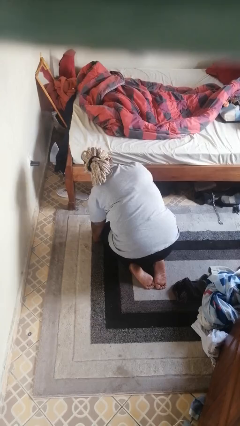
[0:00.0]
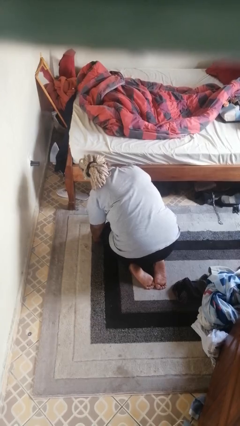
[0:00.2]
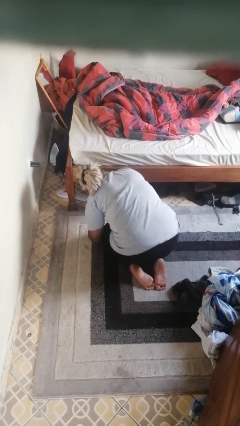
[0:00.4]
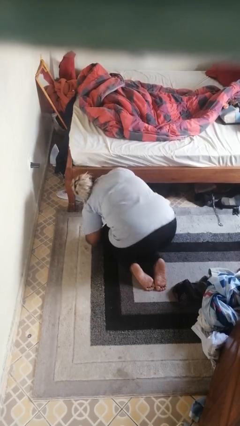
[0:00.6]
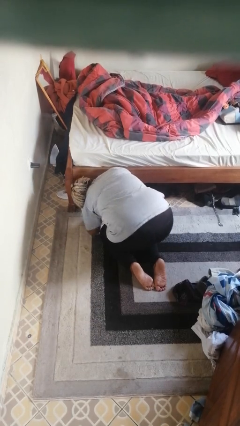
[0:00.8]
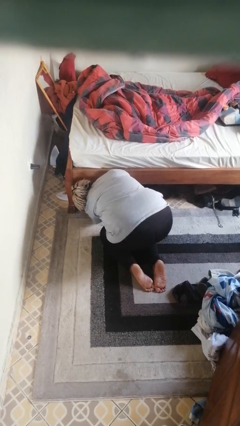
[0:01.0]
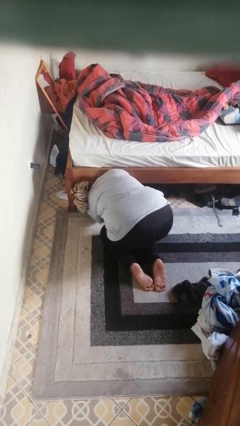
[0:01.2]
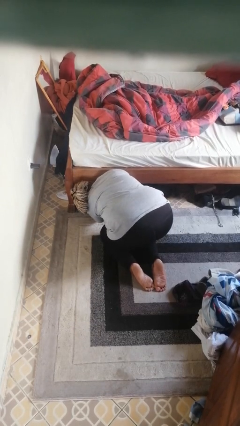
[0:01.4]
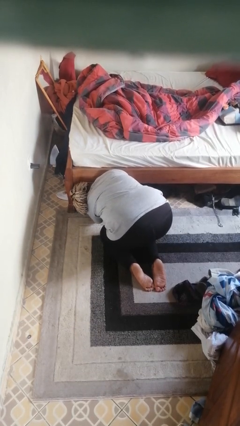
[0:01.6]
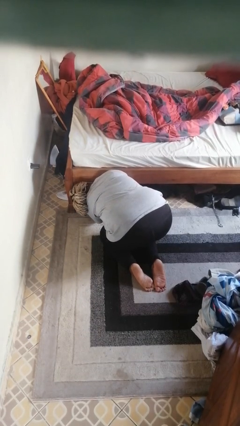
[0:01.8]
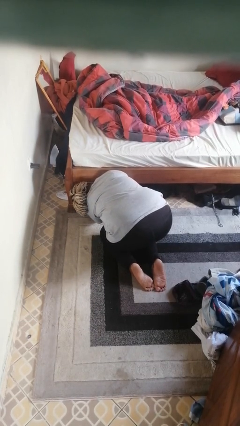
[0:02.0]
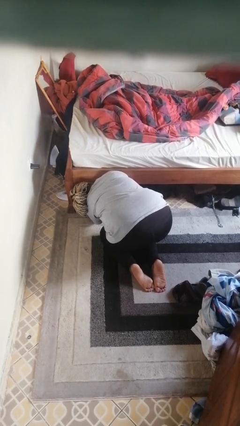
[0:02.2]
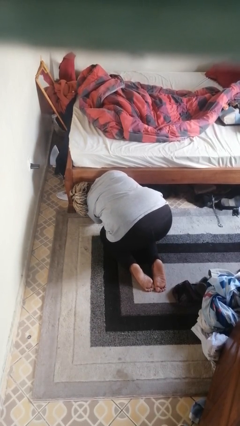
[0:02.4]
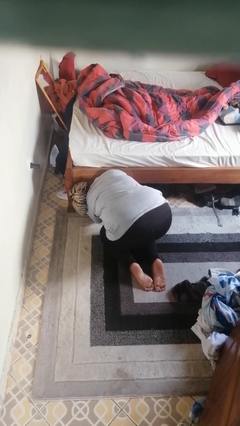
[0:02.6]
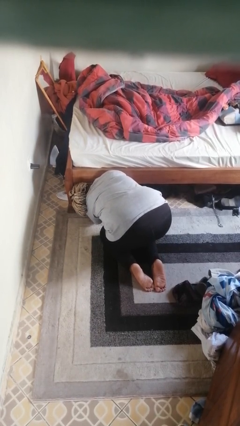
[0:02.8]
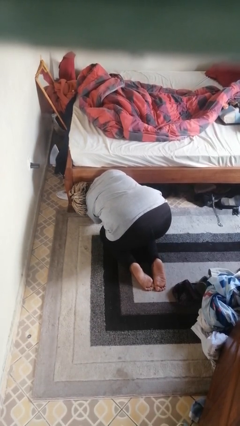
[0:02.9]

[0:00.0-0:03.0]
person searches under bed

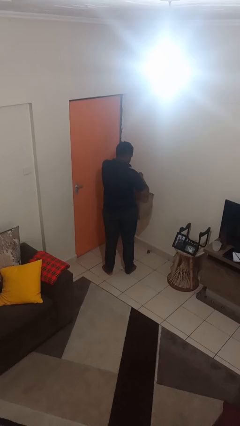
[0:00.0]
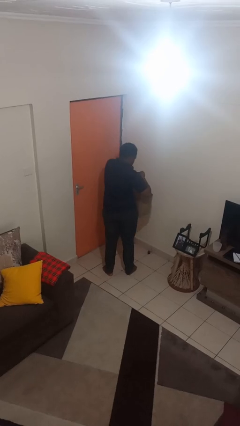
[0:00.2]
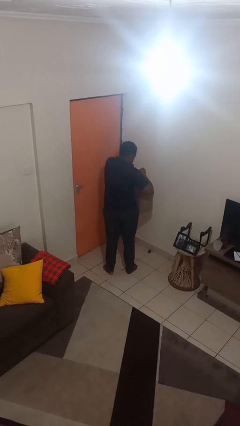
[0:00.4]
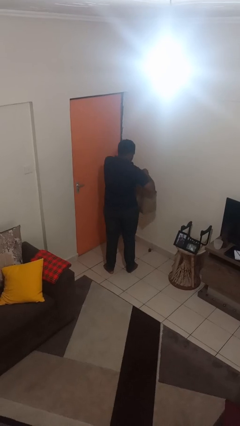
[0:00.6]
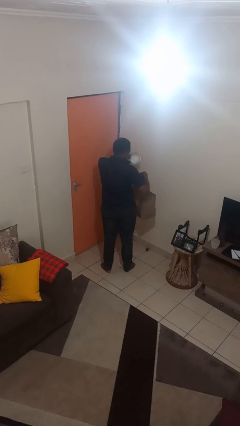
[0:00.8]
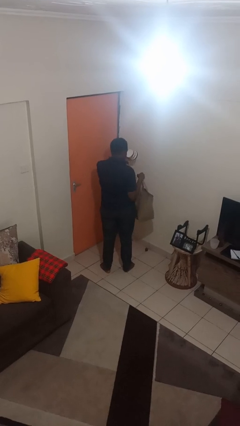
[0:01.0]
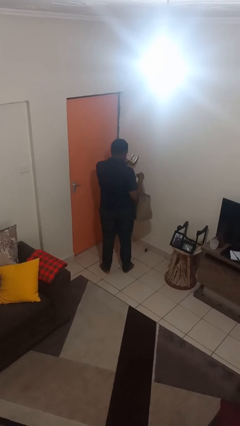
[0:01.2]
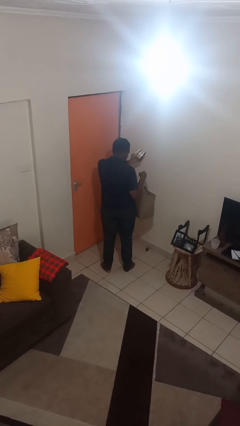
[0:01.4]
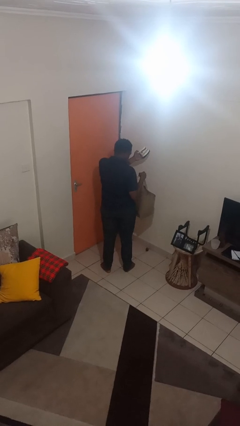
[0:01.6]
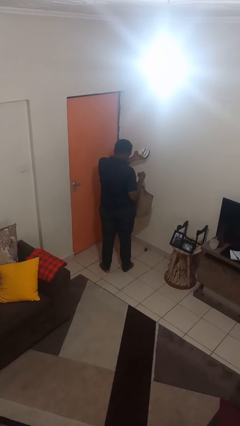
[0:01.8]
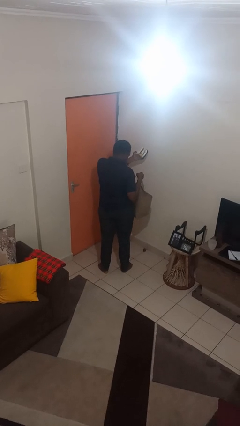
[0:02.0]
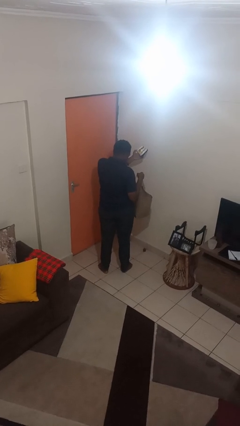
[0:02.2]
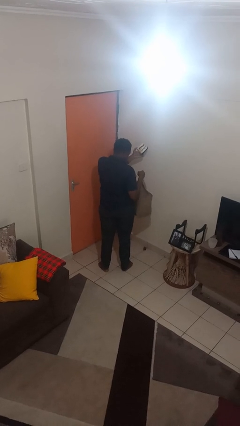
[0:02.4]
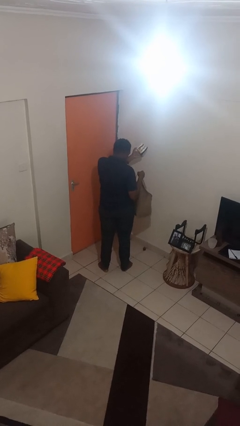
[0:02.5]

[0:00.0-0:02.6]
person takes object from bag

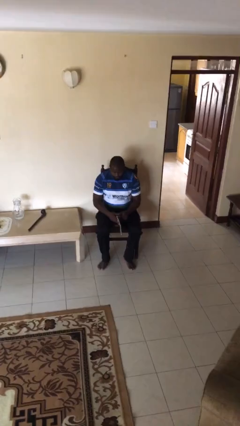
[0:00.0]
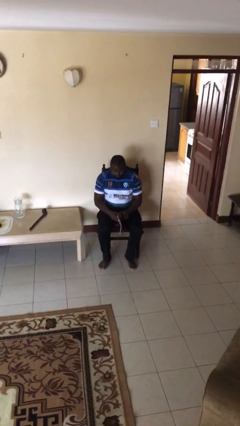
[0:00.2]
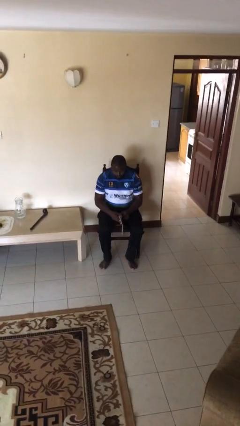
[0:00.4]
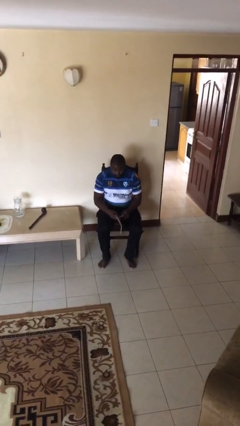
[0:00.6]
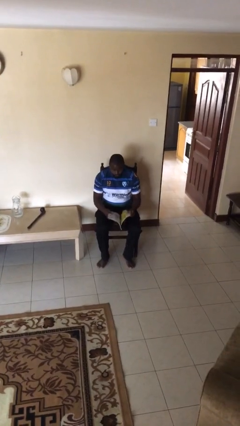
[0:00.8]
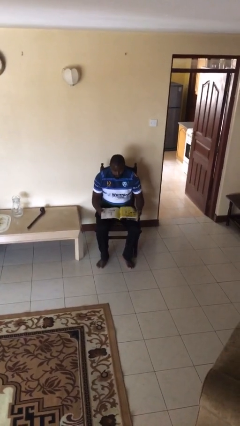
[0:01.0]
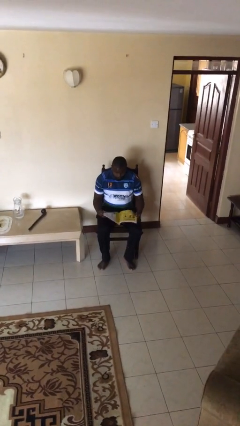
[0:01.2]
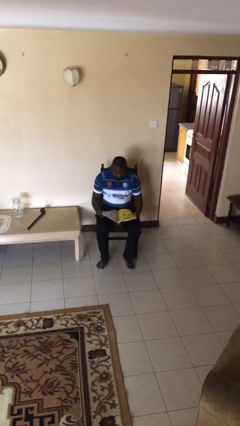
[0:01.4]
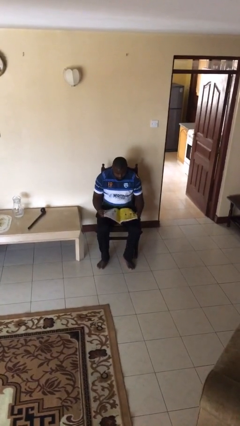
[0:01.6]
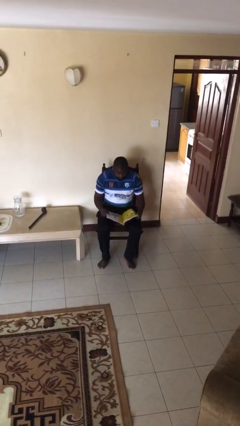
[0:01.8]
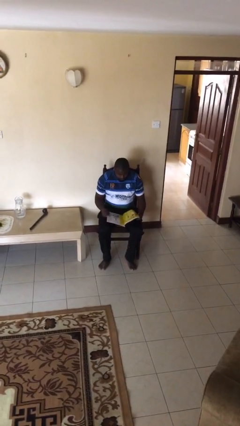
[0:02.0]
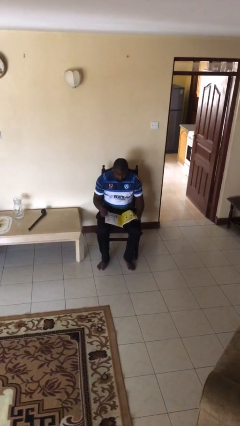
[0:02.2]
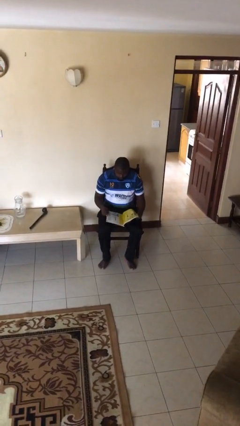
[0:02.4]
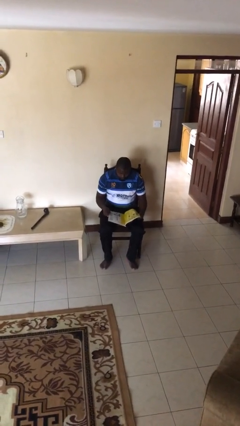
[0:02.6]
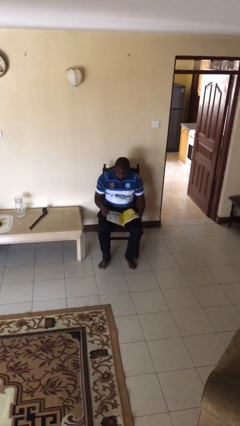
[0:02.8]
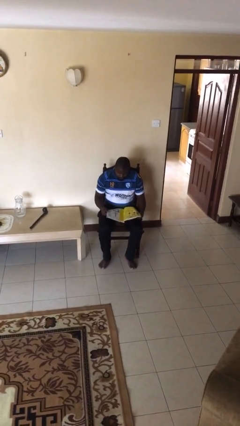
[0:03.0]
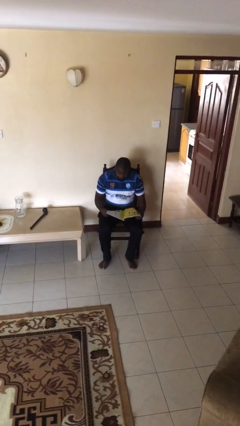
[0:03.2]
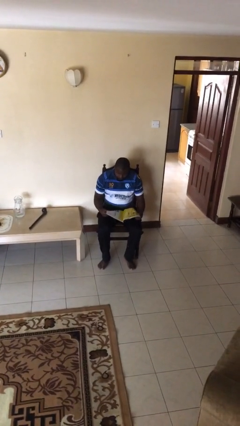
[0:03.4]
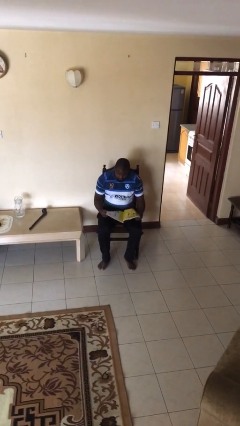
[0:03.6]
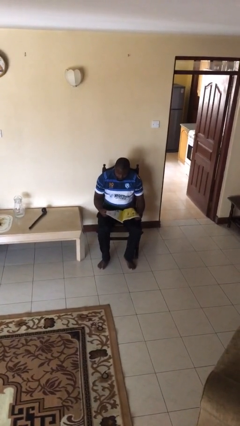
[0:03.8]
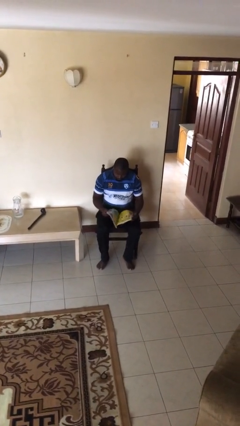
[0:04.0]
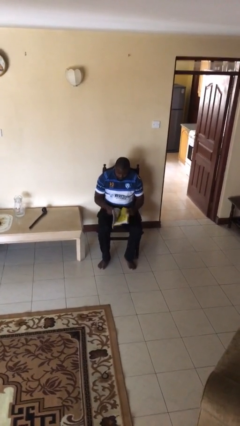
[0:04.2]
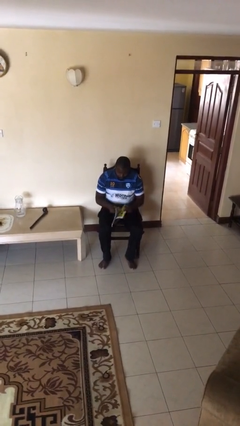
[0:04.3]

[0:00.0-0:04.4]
person reads document

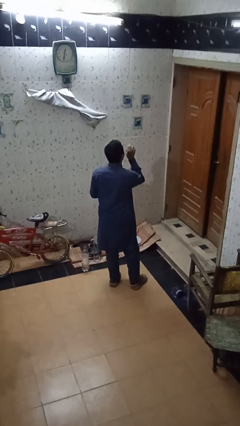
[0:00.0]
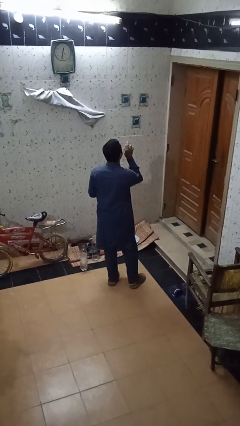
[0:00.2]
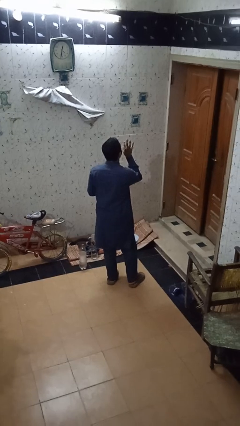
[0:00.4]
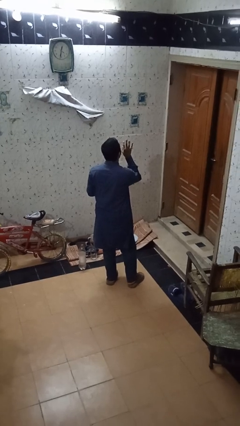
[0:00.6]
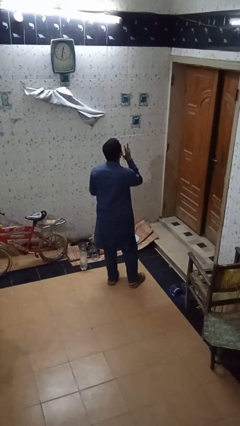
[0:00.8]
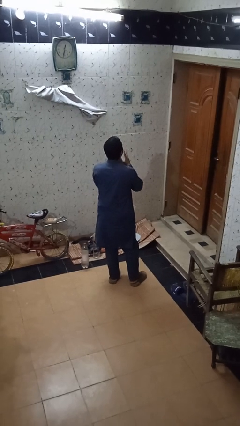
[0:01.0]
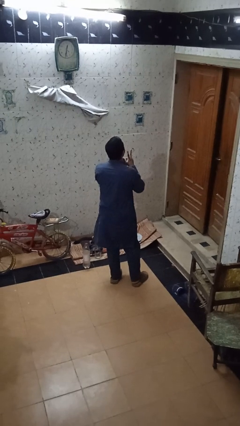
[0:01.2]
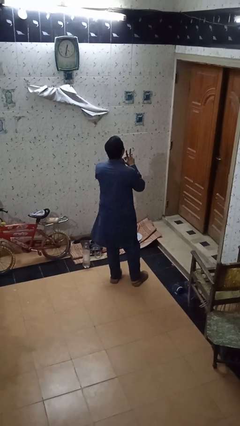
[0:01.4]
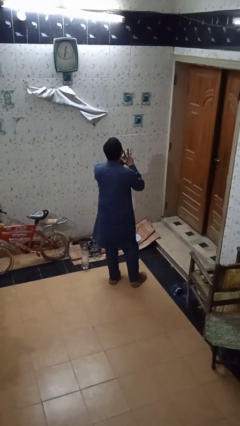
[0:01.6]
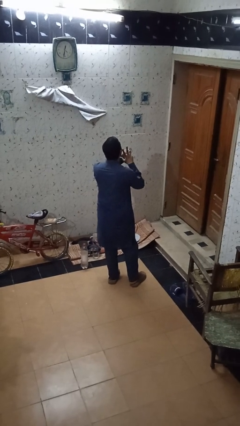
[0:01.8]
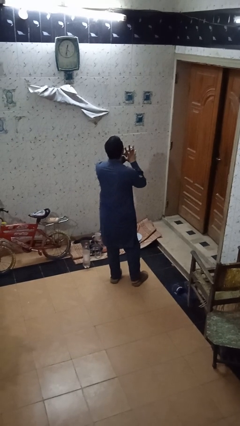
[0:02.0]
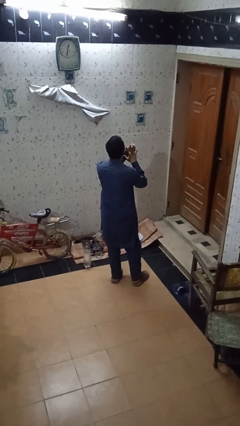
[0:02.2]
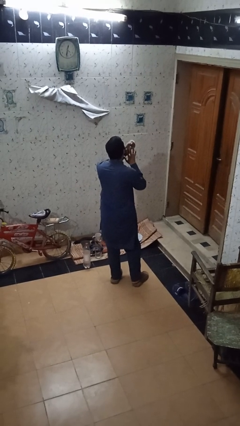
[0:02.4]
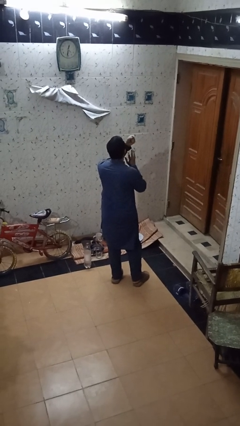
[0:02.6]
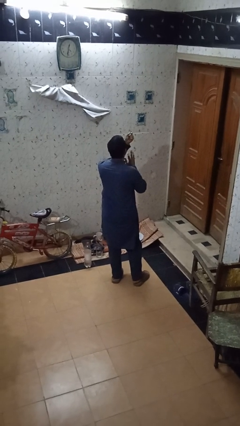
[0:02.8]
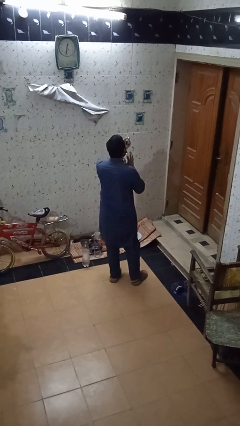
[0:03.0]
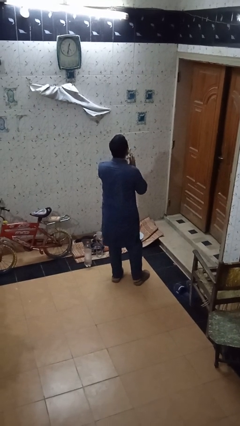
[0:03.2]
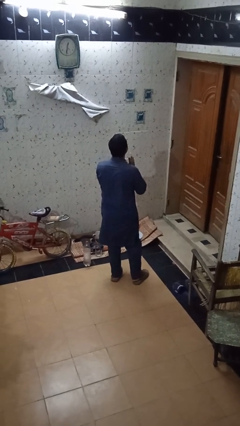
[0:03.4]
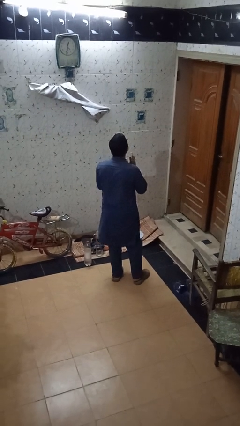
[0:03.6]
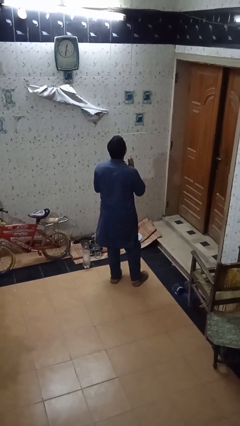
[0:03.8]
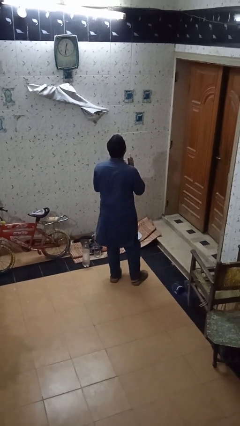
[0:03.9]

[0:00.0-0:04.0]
person takes off ring

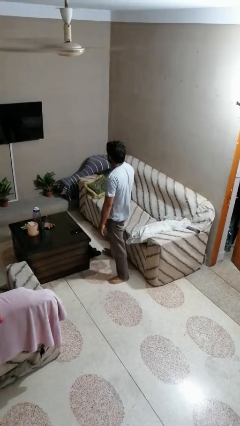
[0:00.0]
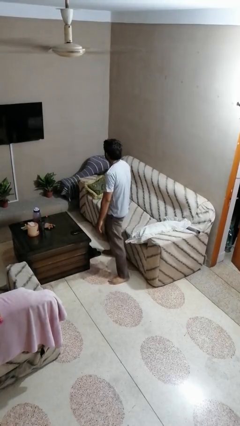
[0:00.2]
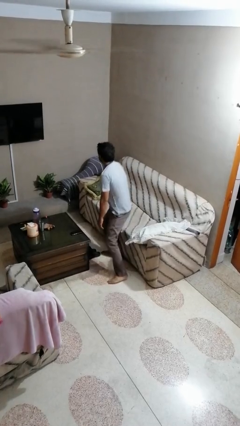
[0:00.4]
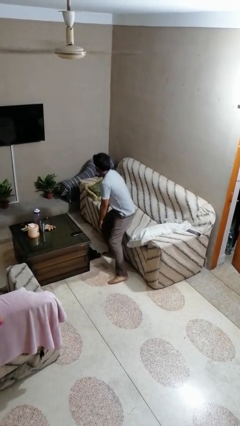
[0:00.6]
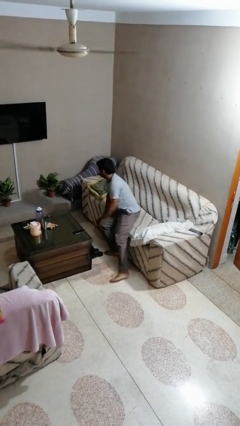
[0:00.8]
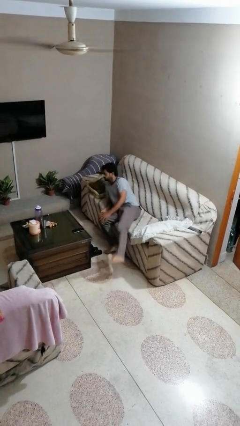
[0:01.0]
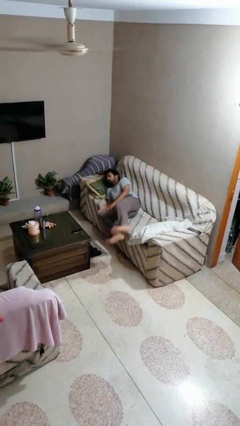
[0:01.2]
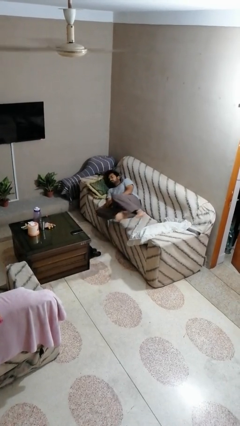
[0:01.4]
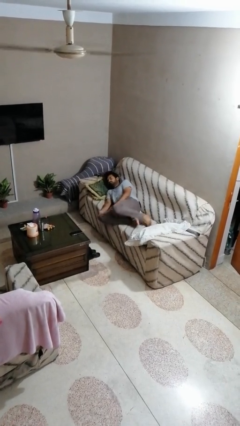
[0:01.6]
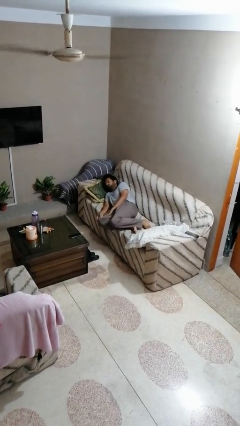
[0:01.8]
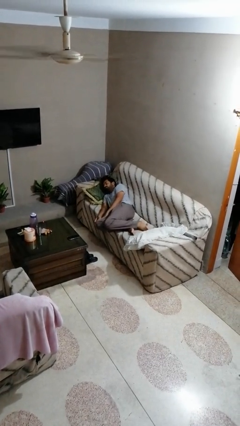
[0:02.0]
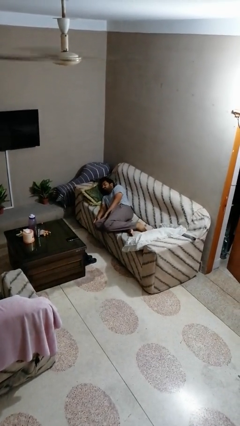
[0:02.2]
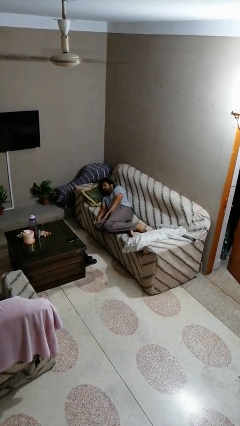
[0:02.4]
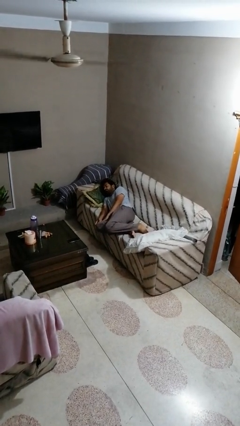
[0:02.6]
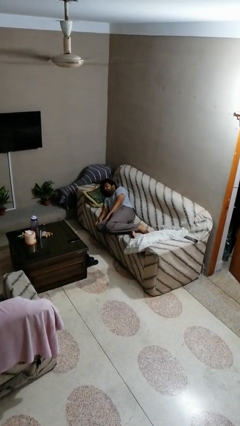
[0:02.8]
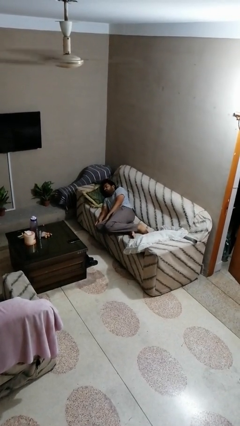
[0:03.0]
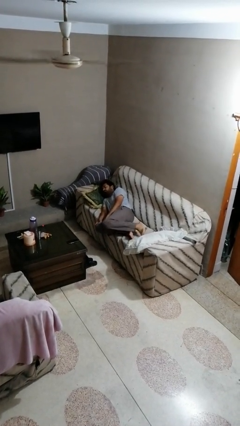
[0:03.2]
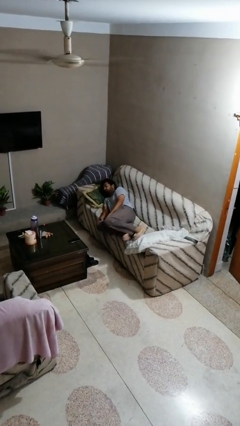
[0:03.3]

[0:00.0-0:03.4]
person lies down on couch

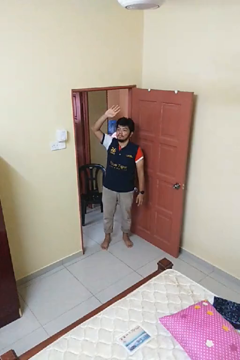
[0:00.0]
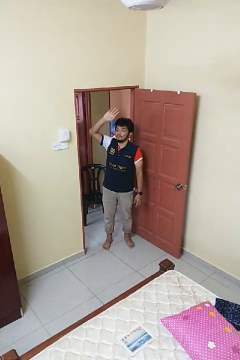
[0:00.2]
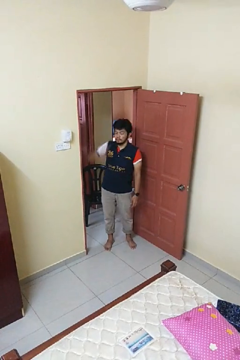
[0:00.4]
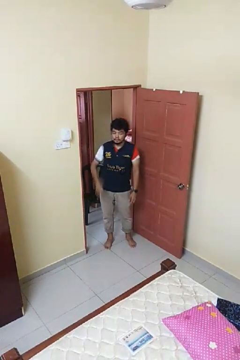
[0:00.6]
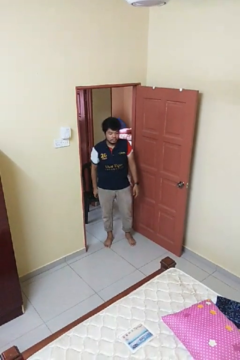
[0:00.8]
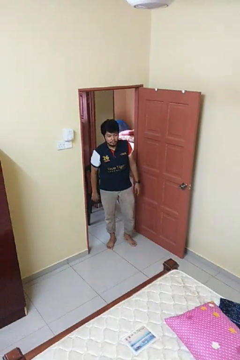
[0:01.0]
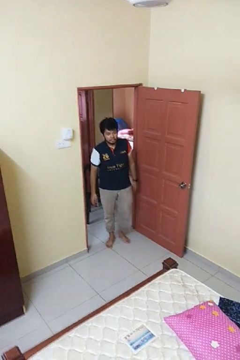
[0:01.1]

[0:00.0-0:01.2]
person gestures lower hand
